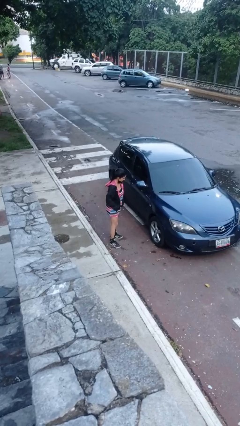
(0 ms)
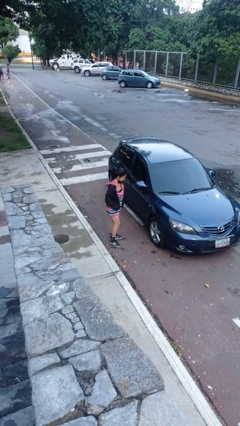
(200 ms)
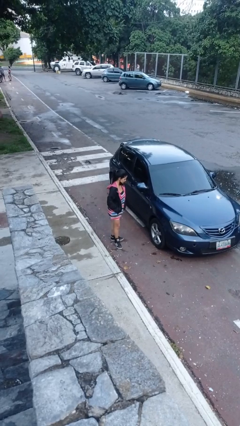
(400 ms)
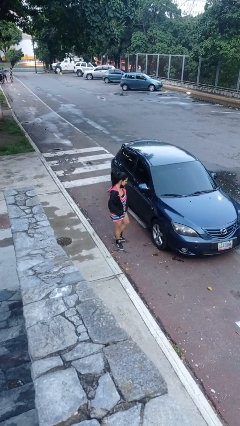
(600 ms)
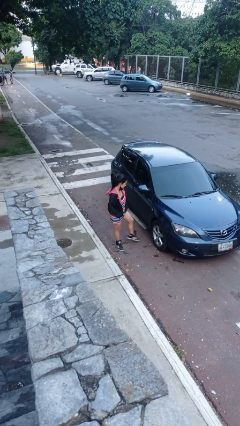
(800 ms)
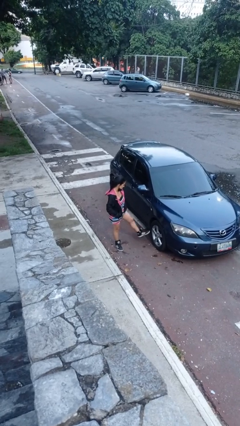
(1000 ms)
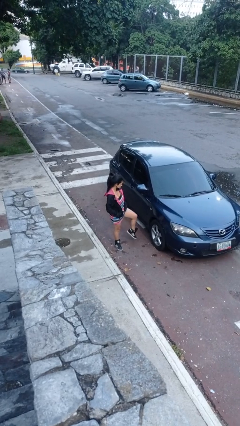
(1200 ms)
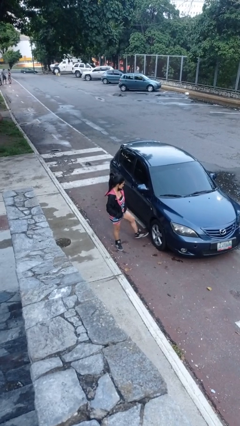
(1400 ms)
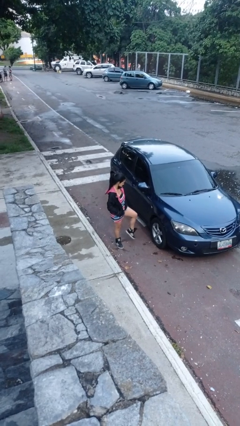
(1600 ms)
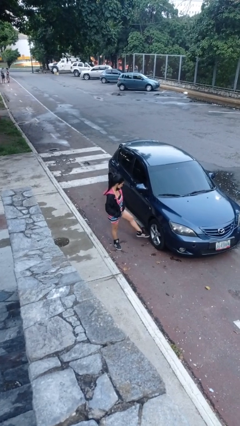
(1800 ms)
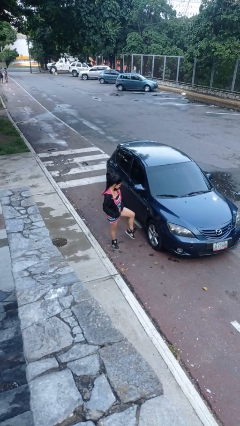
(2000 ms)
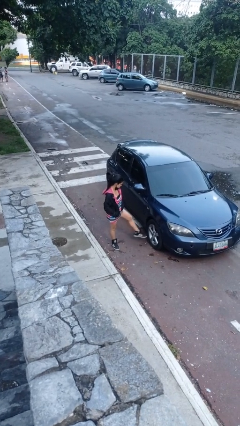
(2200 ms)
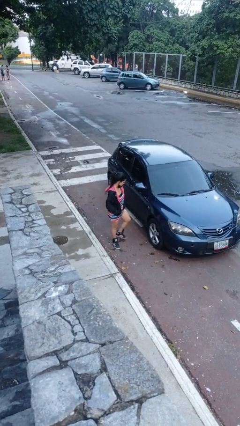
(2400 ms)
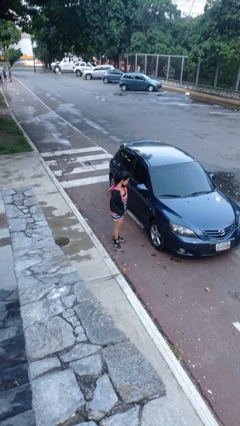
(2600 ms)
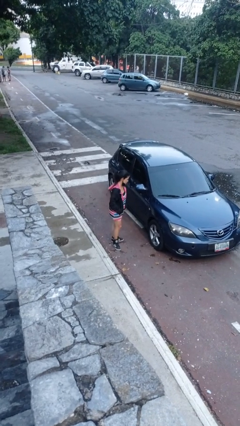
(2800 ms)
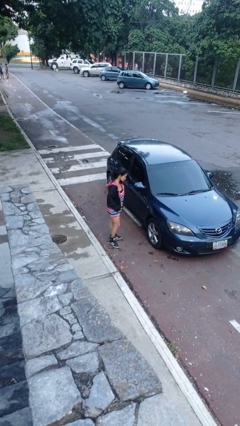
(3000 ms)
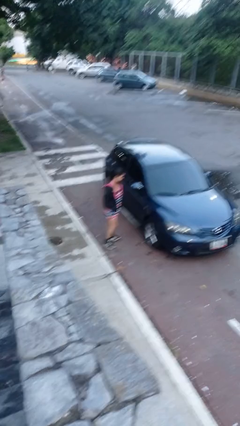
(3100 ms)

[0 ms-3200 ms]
person kicks car tires

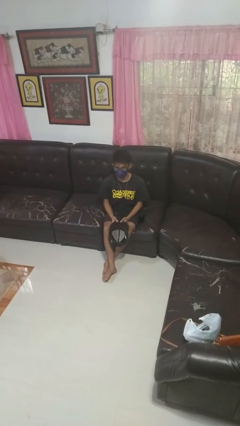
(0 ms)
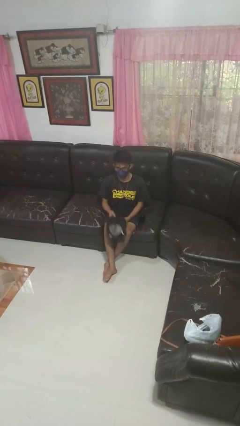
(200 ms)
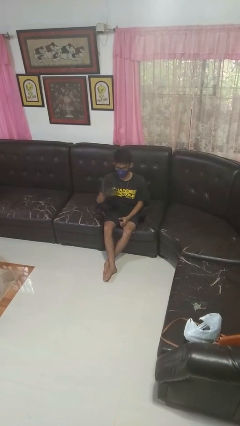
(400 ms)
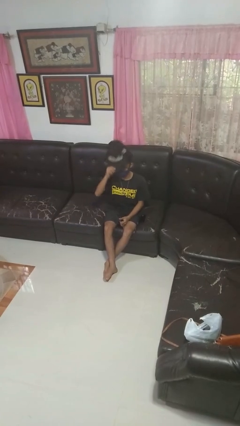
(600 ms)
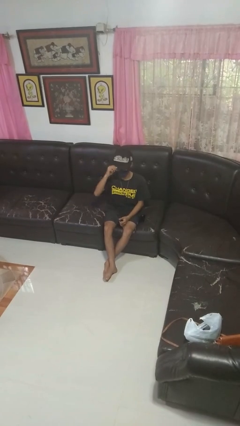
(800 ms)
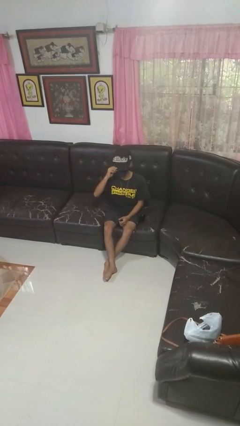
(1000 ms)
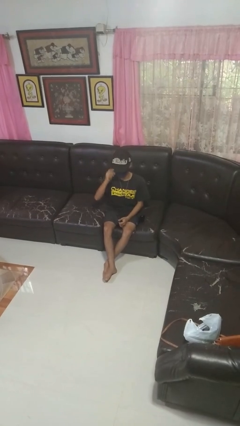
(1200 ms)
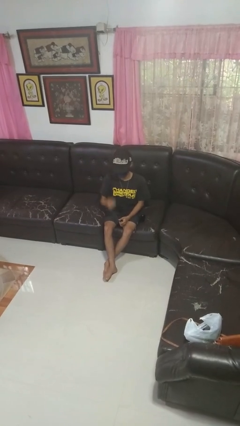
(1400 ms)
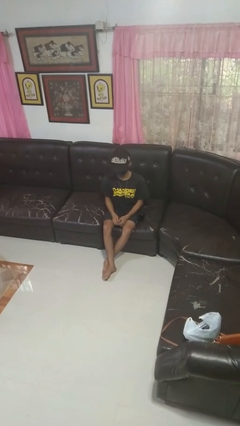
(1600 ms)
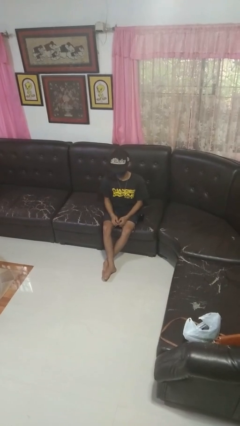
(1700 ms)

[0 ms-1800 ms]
person puts on hat

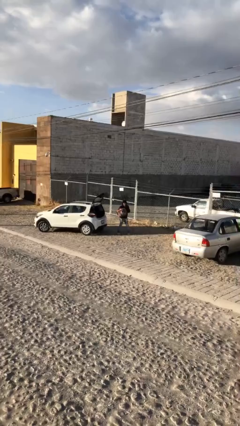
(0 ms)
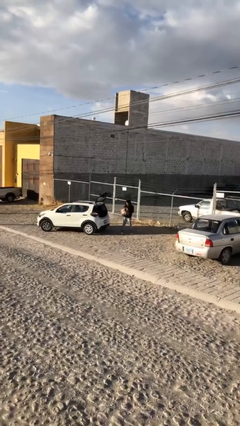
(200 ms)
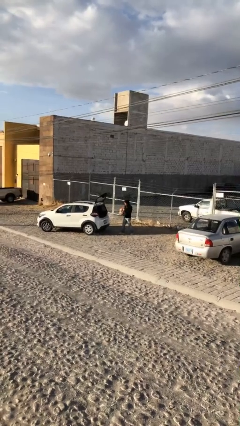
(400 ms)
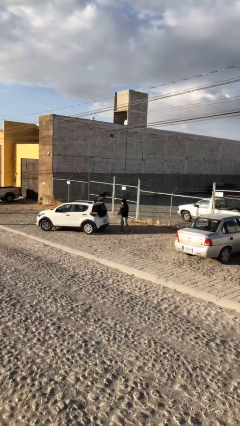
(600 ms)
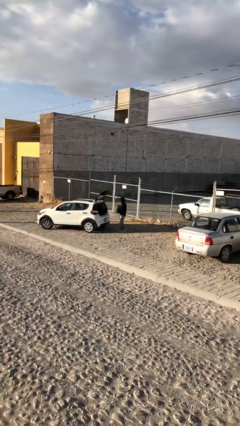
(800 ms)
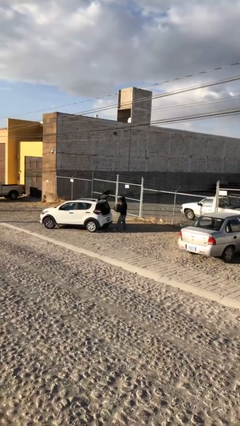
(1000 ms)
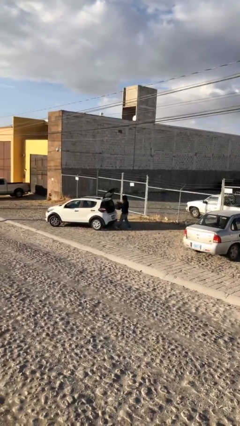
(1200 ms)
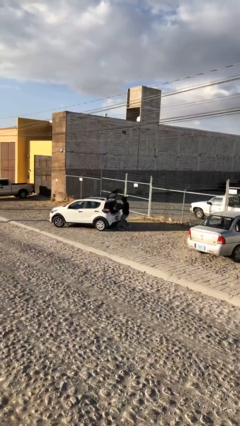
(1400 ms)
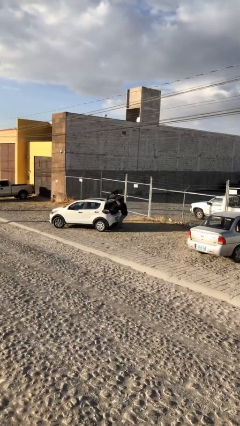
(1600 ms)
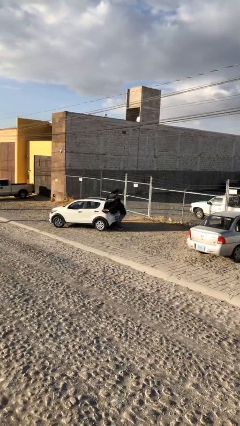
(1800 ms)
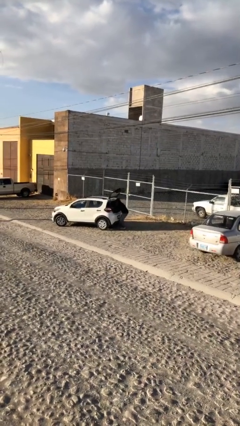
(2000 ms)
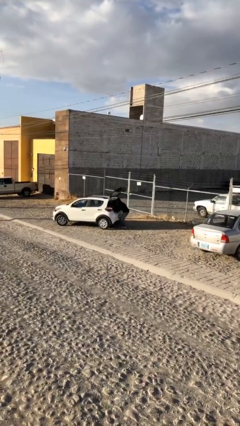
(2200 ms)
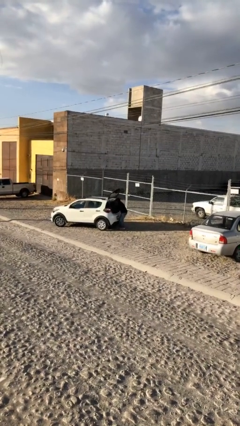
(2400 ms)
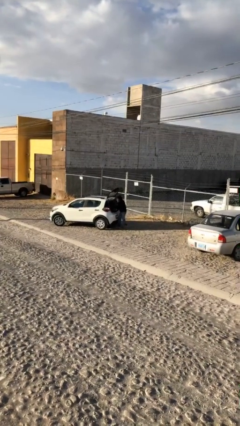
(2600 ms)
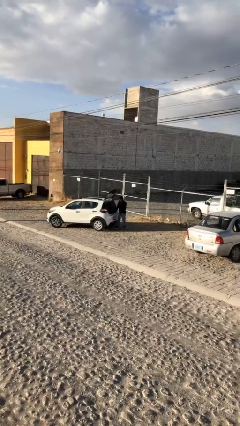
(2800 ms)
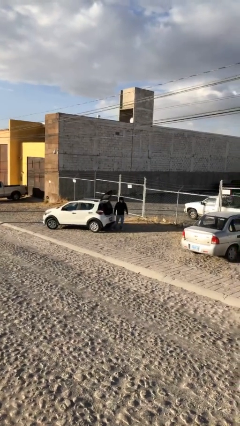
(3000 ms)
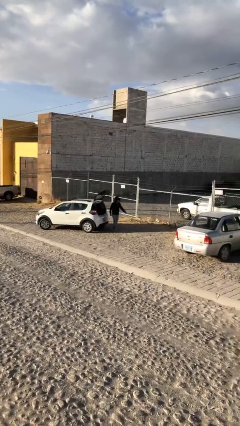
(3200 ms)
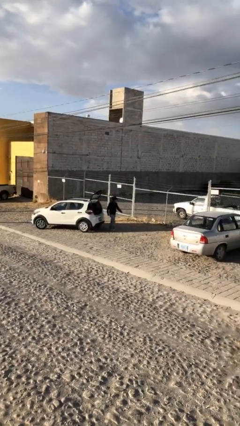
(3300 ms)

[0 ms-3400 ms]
person loads car

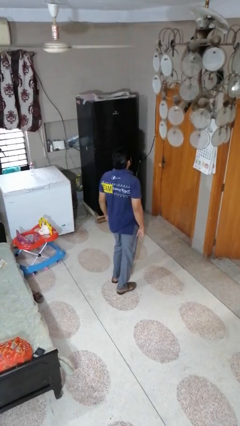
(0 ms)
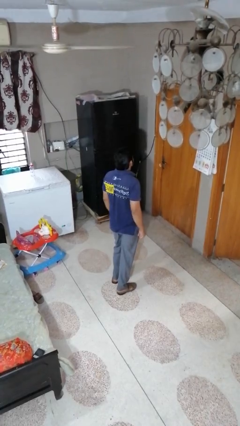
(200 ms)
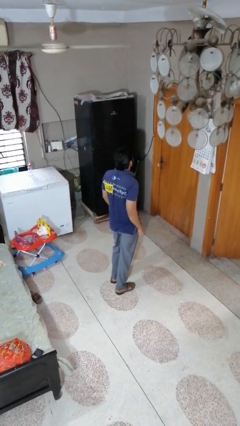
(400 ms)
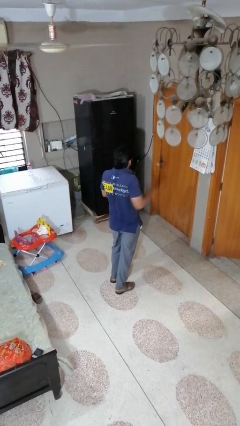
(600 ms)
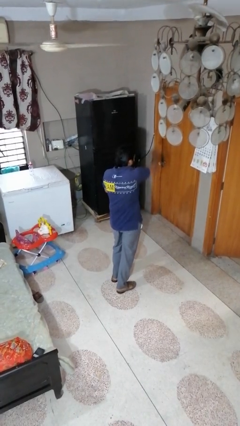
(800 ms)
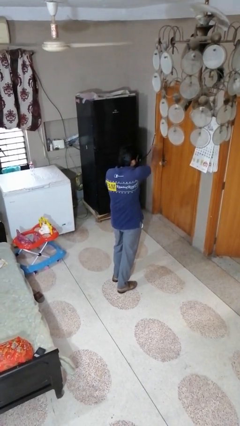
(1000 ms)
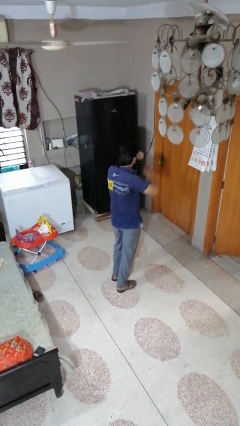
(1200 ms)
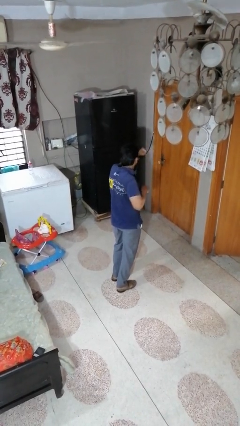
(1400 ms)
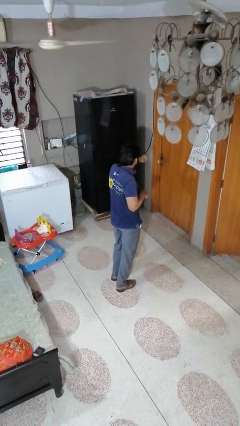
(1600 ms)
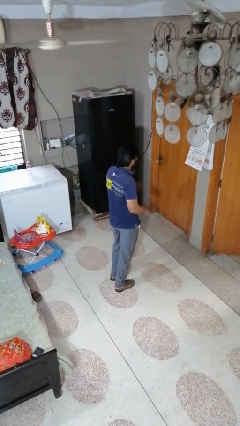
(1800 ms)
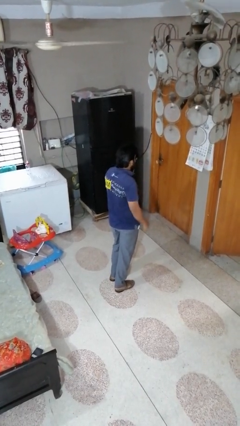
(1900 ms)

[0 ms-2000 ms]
person karate chop

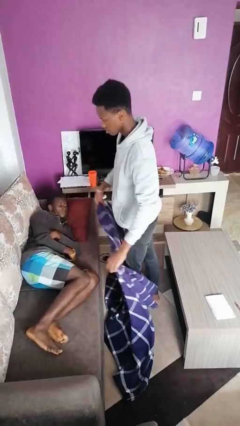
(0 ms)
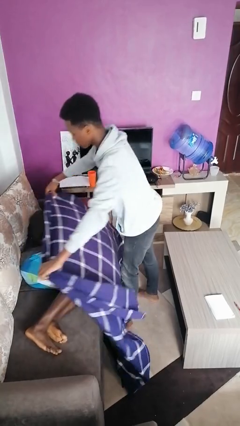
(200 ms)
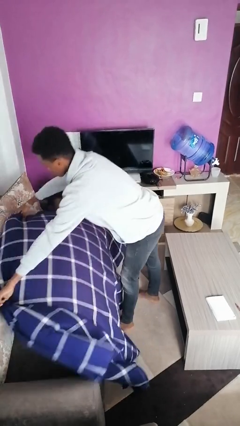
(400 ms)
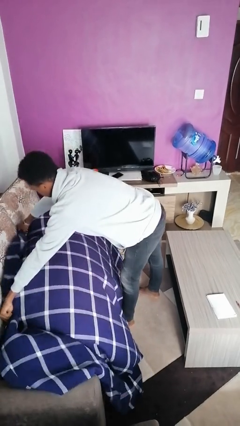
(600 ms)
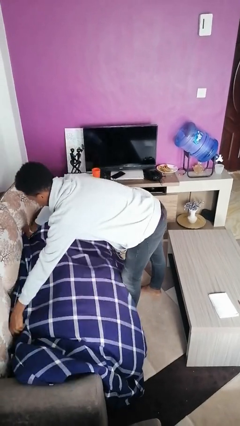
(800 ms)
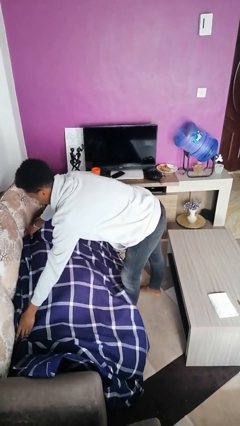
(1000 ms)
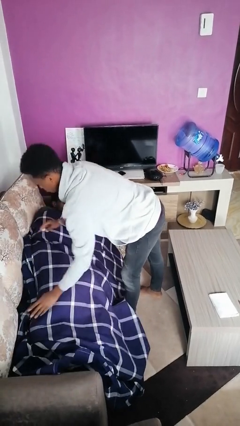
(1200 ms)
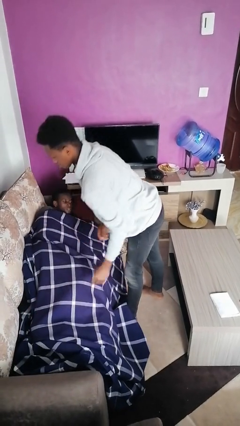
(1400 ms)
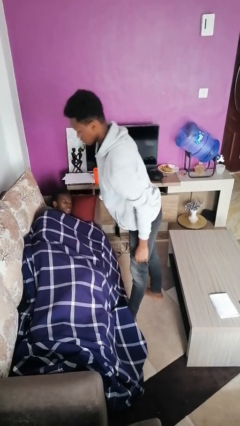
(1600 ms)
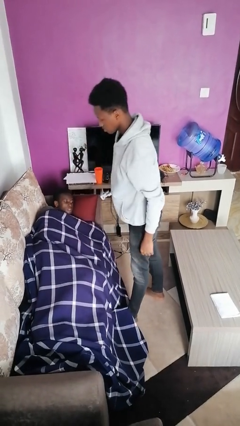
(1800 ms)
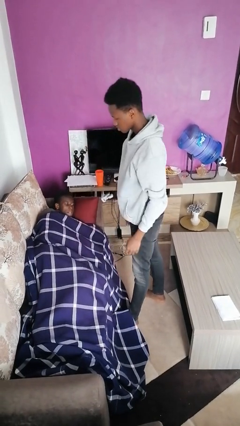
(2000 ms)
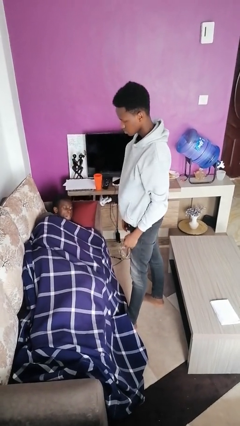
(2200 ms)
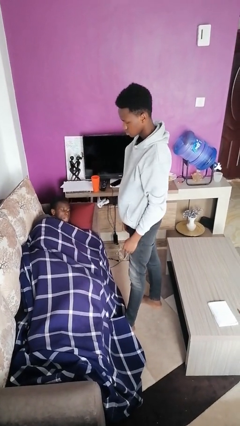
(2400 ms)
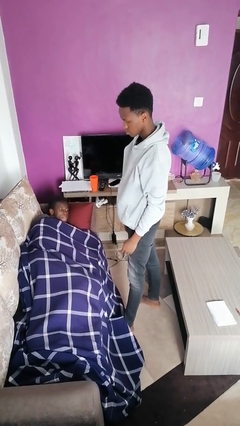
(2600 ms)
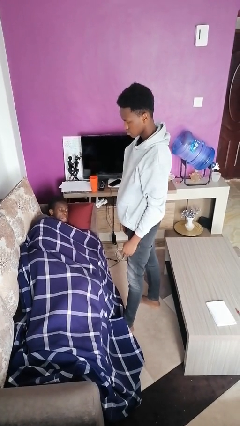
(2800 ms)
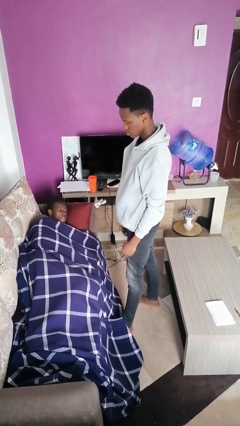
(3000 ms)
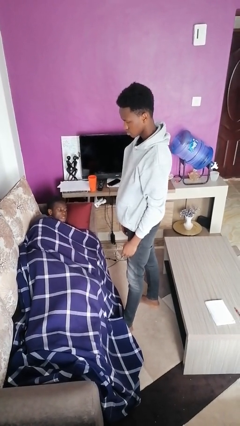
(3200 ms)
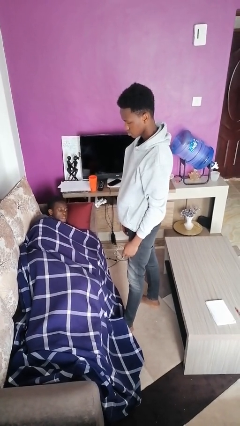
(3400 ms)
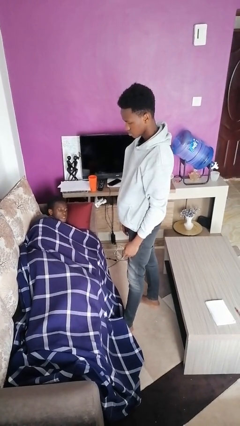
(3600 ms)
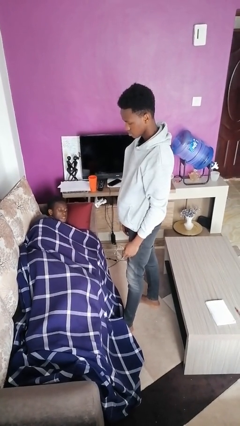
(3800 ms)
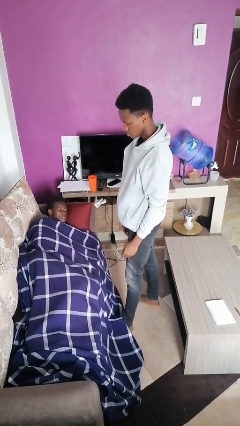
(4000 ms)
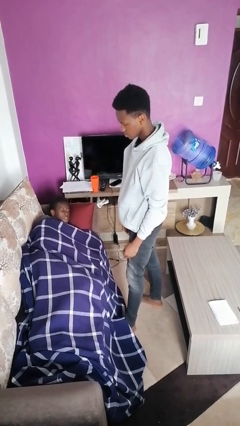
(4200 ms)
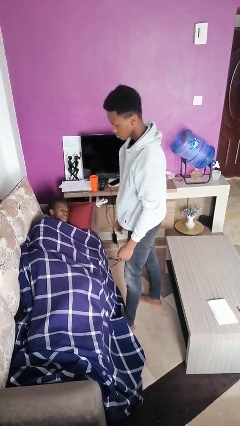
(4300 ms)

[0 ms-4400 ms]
person covers friend with blanket

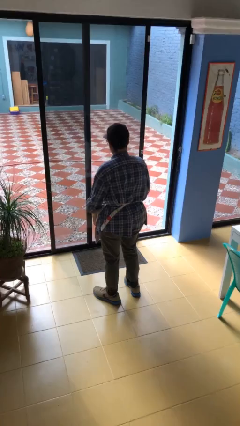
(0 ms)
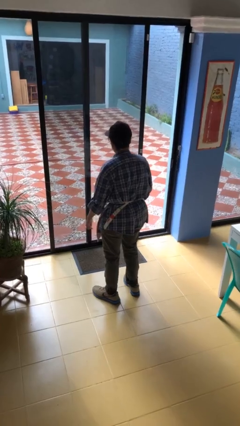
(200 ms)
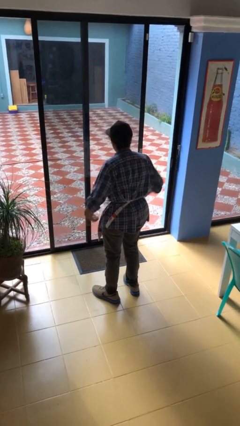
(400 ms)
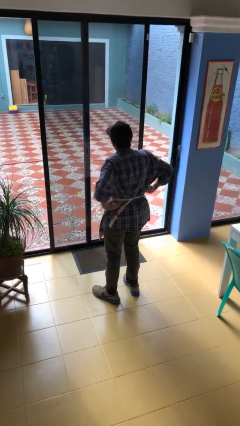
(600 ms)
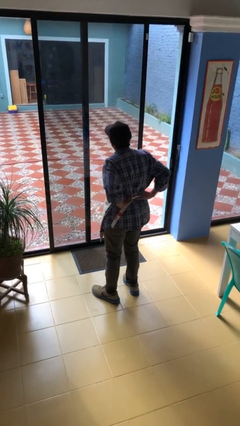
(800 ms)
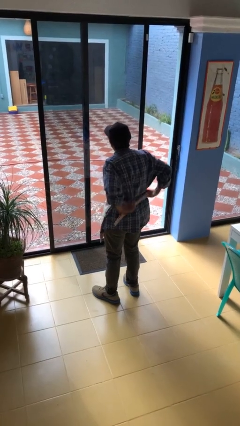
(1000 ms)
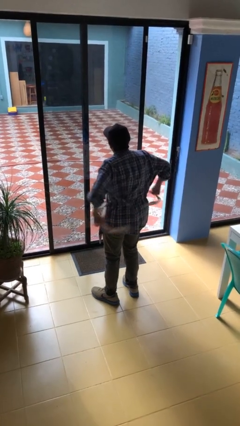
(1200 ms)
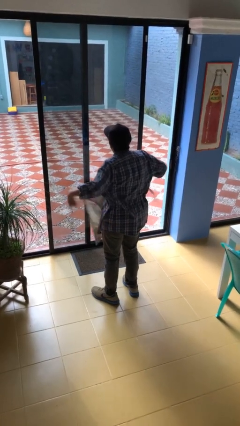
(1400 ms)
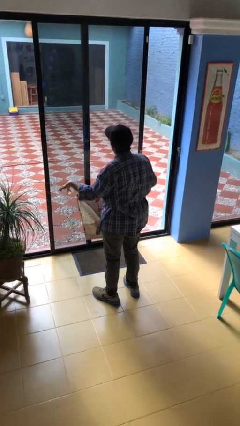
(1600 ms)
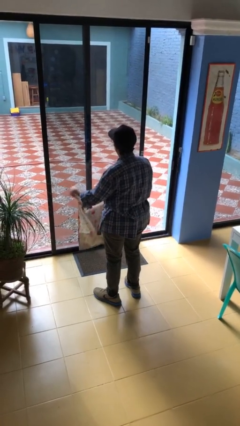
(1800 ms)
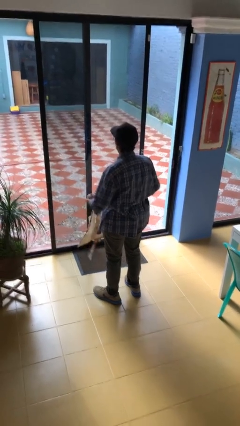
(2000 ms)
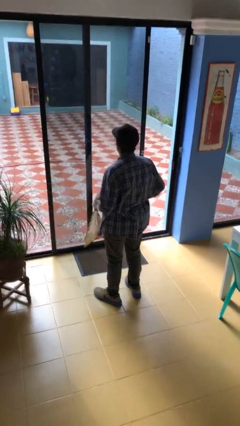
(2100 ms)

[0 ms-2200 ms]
person takes off apron

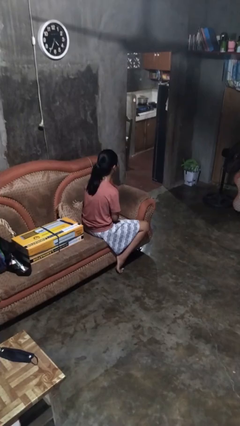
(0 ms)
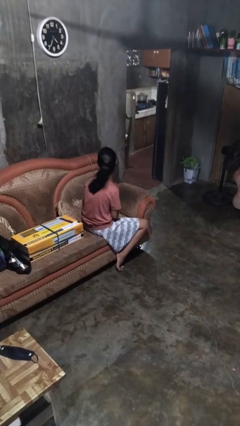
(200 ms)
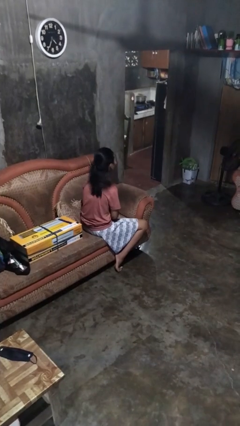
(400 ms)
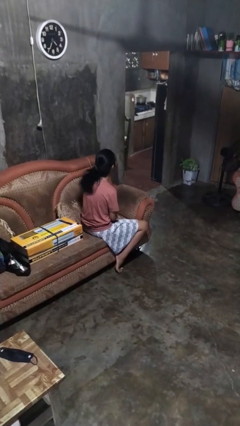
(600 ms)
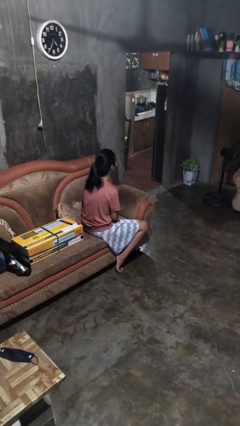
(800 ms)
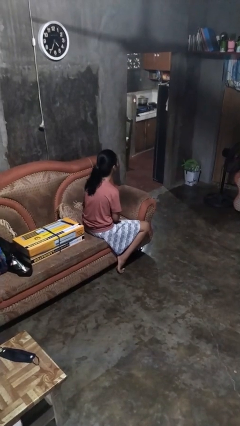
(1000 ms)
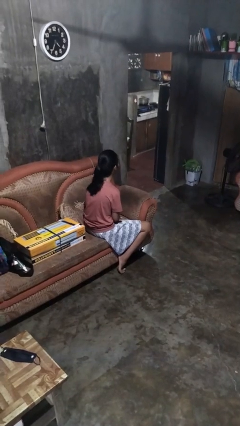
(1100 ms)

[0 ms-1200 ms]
person shakes head
